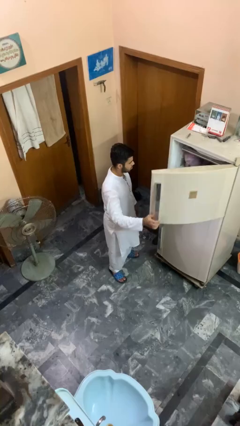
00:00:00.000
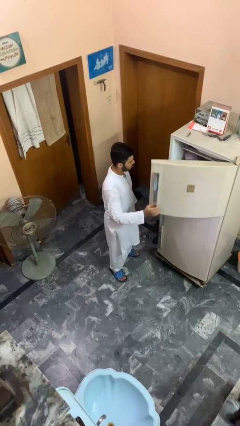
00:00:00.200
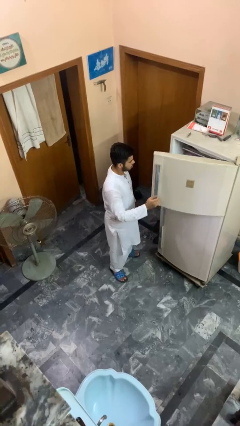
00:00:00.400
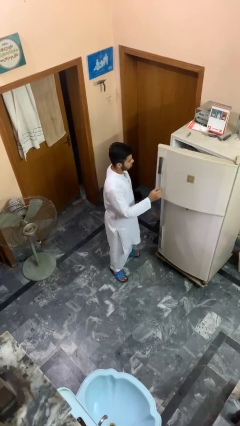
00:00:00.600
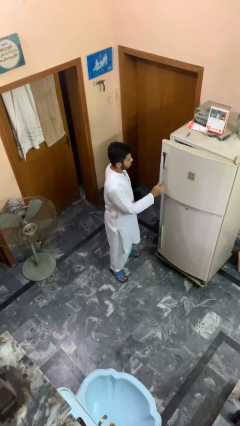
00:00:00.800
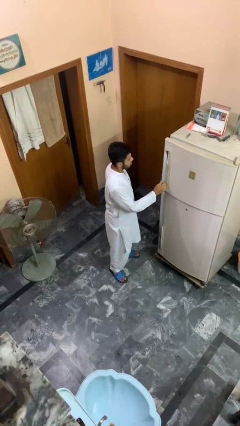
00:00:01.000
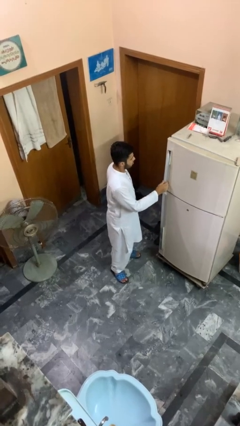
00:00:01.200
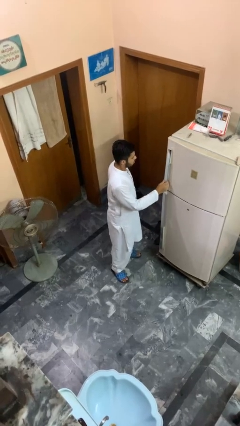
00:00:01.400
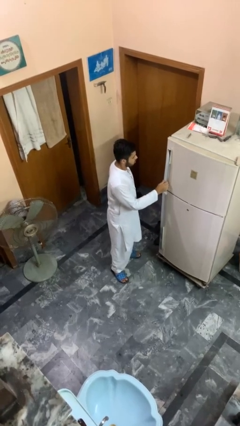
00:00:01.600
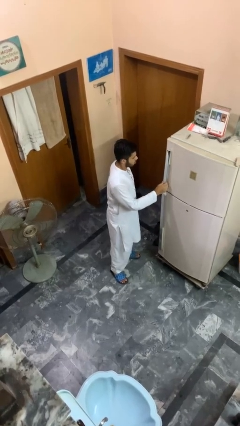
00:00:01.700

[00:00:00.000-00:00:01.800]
person closes refrigerator

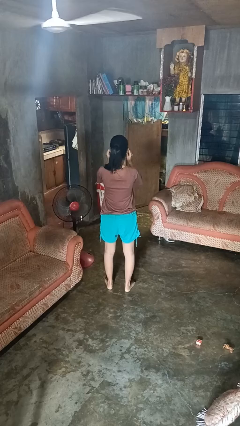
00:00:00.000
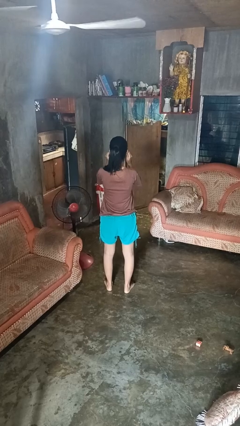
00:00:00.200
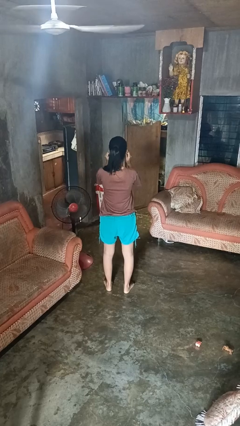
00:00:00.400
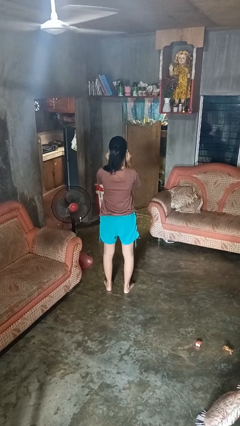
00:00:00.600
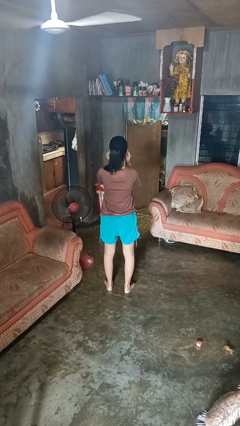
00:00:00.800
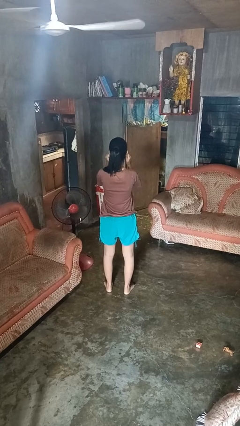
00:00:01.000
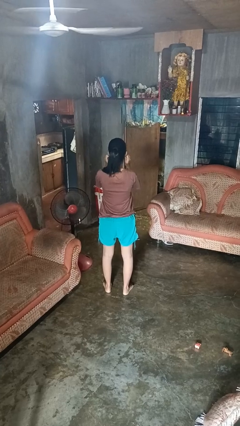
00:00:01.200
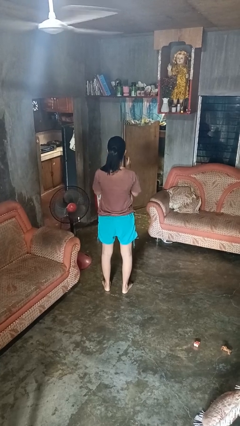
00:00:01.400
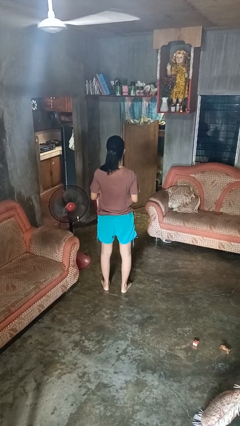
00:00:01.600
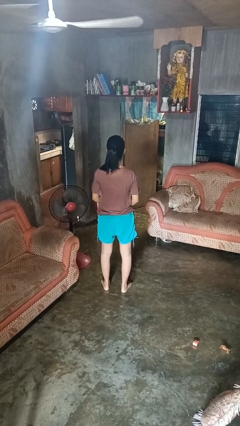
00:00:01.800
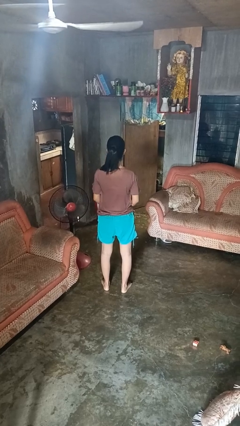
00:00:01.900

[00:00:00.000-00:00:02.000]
person touches earlobe

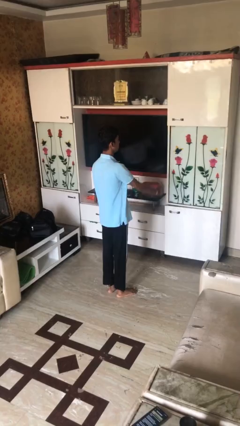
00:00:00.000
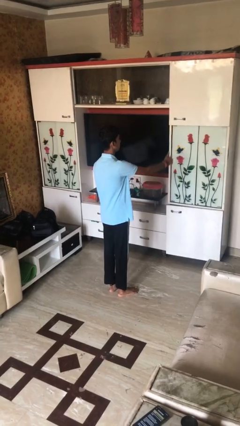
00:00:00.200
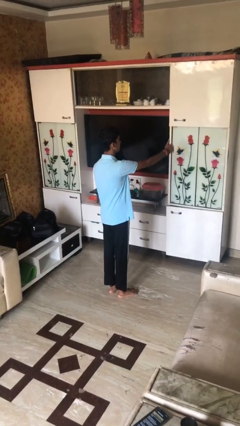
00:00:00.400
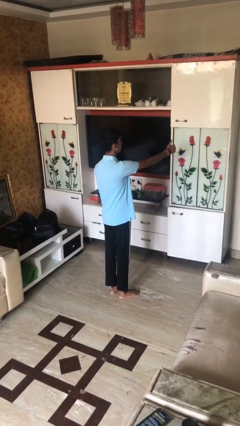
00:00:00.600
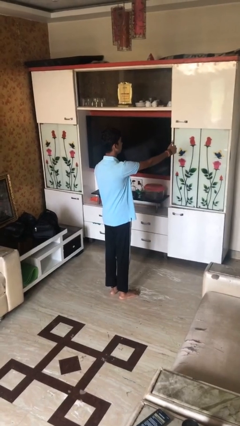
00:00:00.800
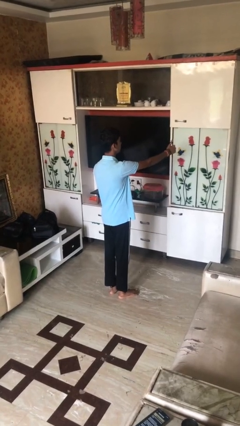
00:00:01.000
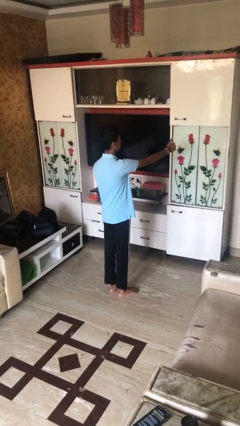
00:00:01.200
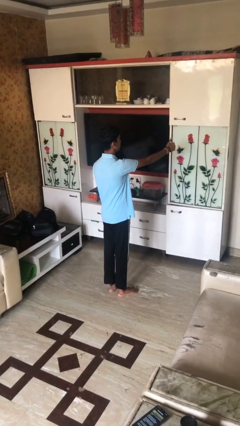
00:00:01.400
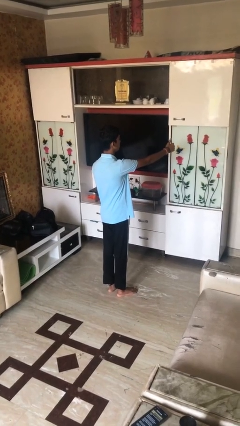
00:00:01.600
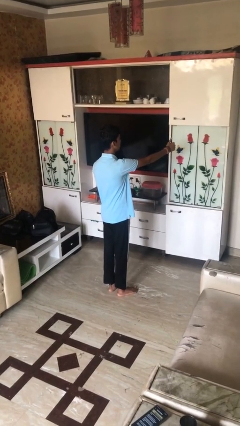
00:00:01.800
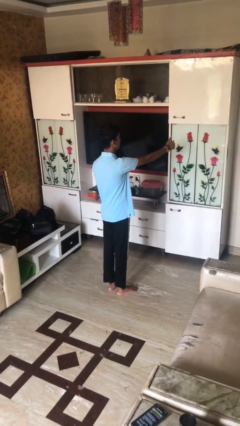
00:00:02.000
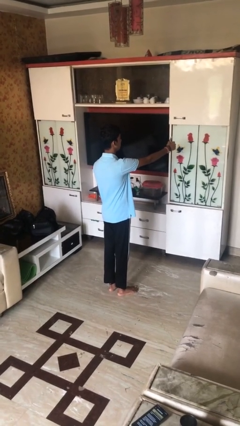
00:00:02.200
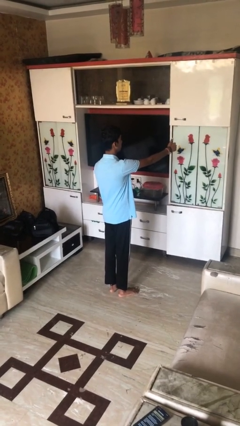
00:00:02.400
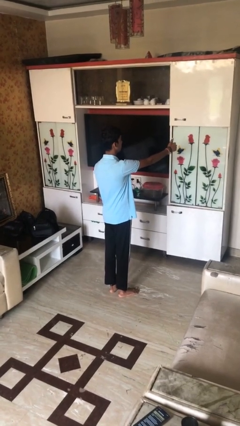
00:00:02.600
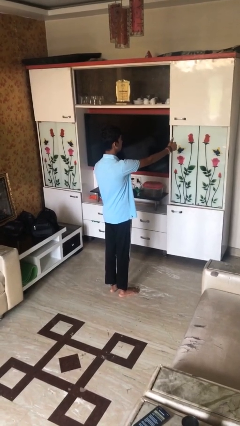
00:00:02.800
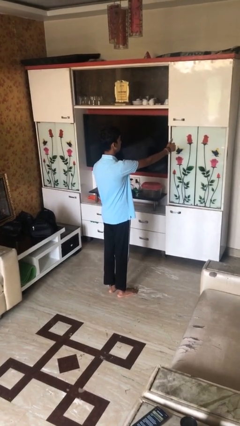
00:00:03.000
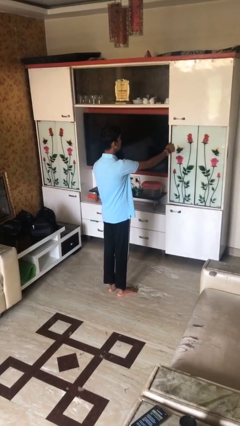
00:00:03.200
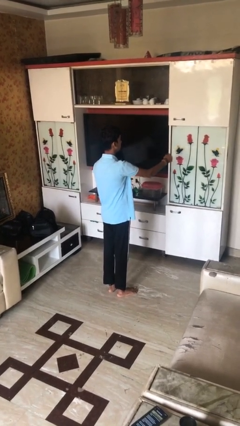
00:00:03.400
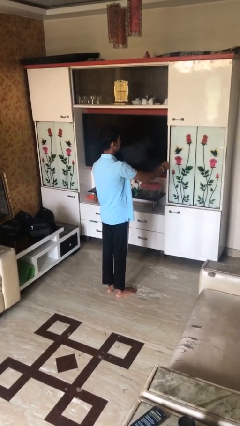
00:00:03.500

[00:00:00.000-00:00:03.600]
person gestures thumbs up

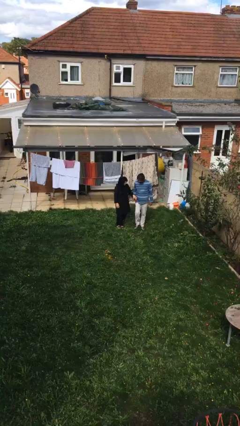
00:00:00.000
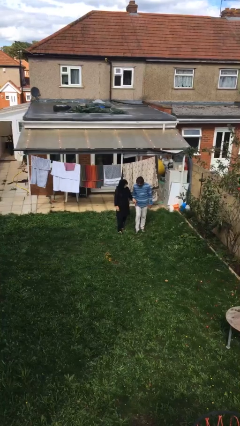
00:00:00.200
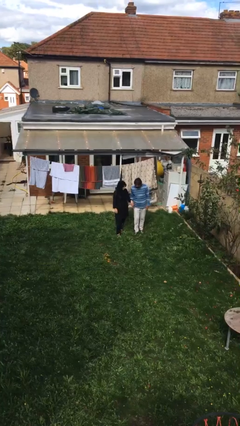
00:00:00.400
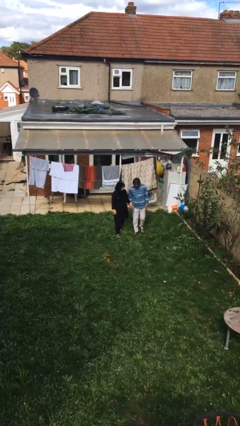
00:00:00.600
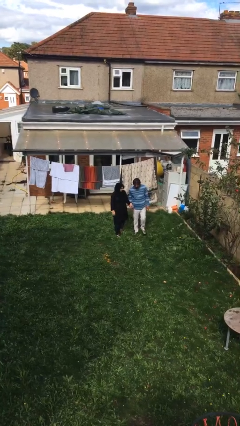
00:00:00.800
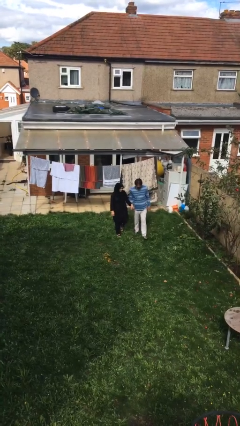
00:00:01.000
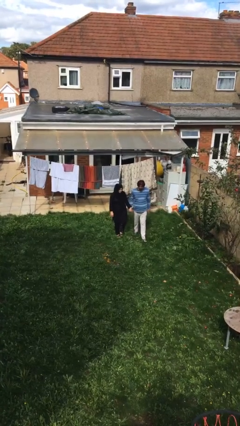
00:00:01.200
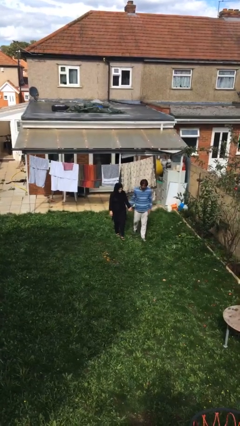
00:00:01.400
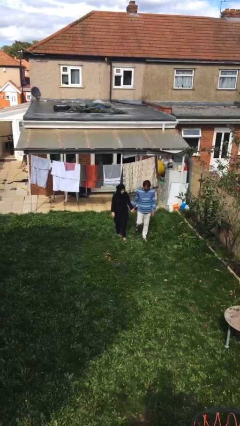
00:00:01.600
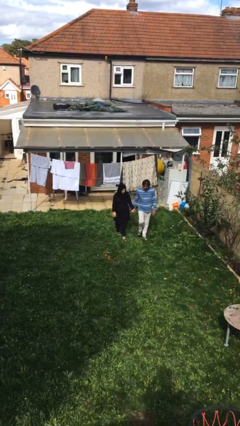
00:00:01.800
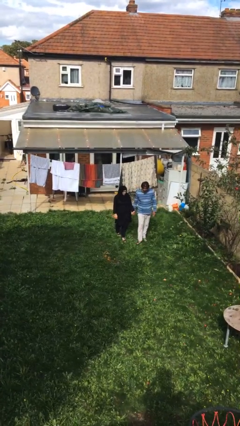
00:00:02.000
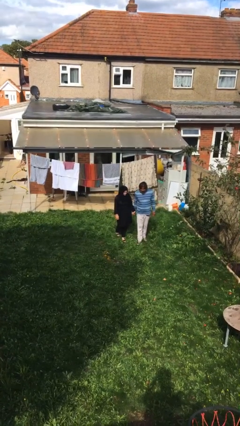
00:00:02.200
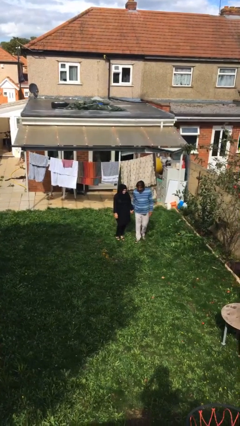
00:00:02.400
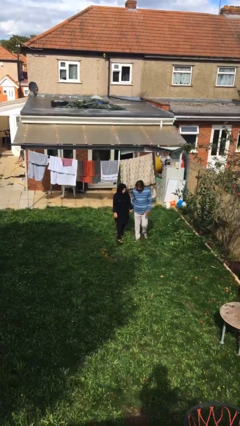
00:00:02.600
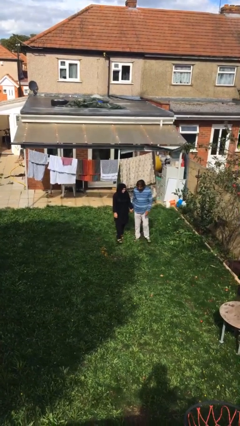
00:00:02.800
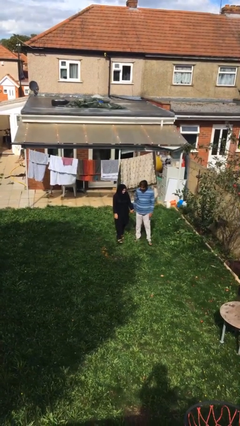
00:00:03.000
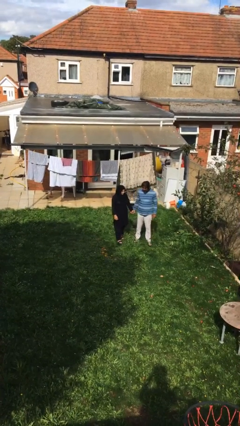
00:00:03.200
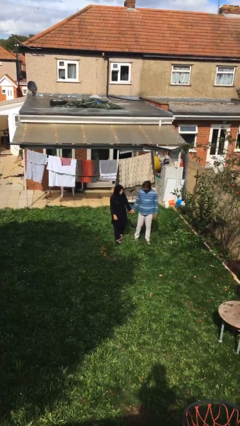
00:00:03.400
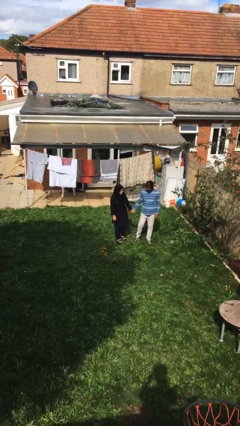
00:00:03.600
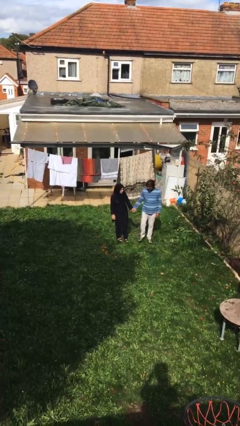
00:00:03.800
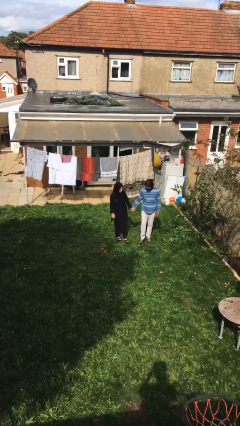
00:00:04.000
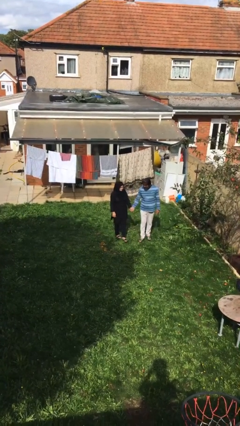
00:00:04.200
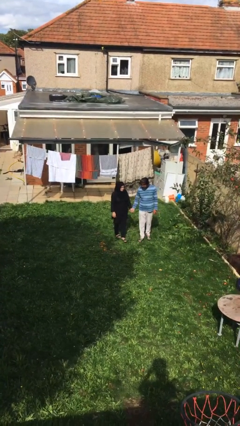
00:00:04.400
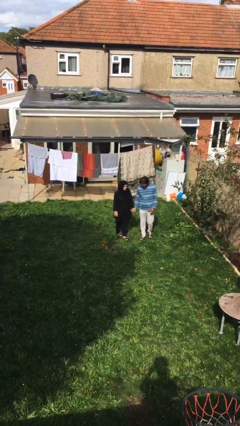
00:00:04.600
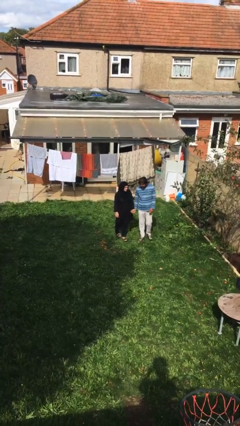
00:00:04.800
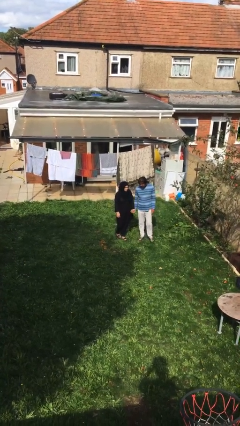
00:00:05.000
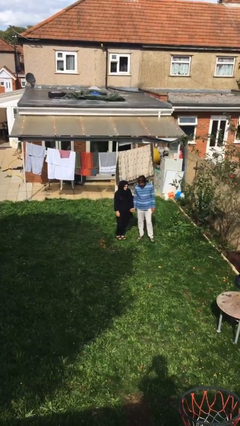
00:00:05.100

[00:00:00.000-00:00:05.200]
person holds hand

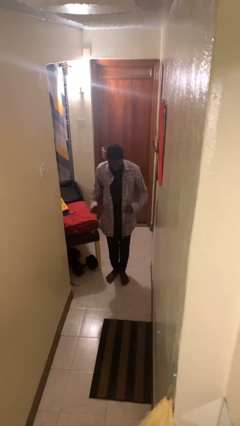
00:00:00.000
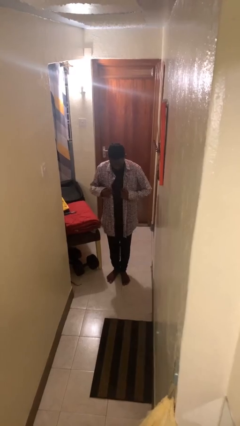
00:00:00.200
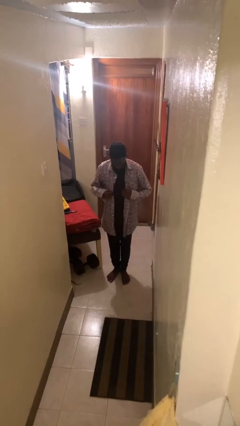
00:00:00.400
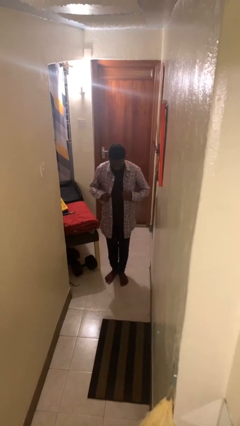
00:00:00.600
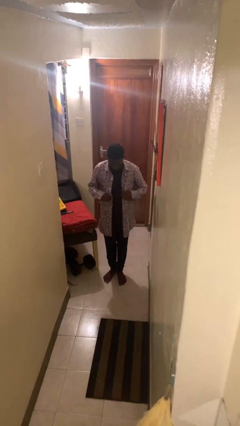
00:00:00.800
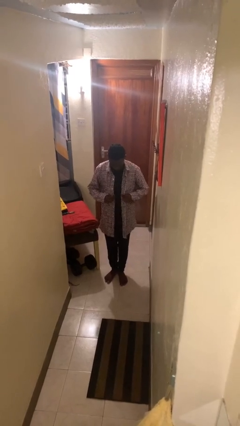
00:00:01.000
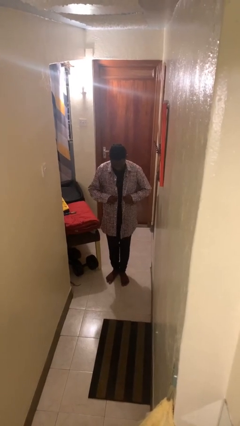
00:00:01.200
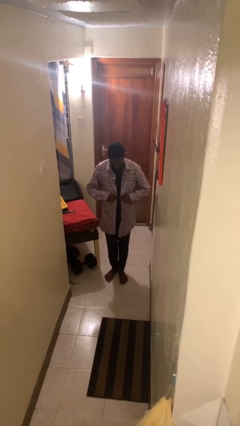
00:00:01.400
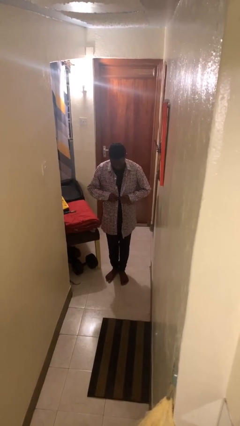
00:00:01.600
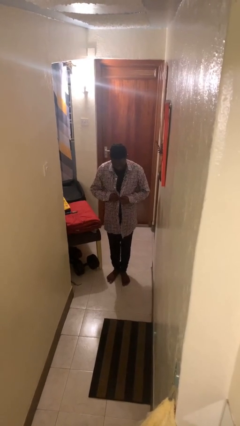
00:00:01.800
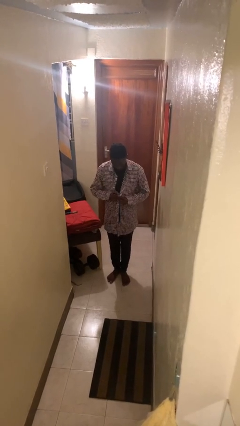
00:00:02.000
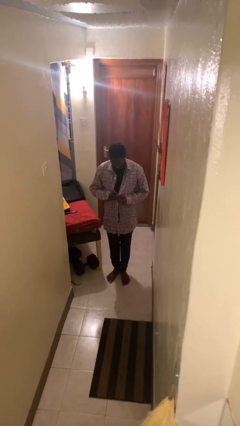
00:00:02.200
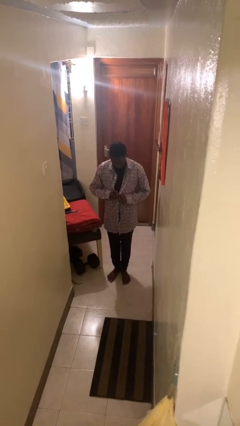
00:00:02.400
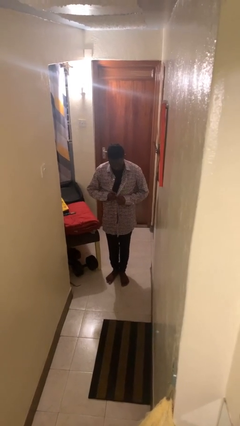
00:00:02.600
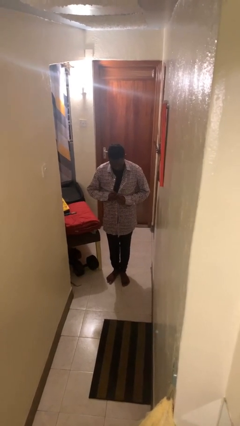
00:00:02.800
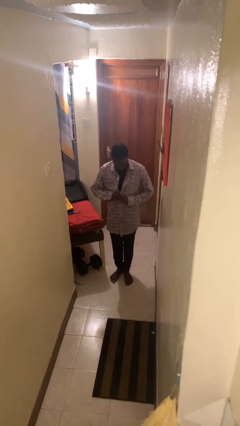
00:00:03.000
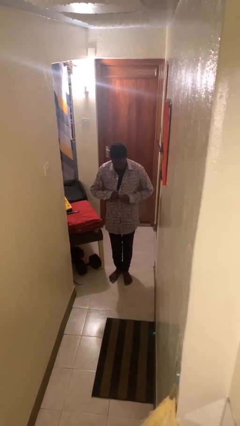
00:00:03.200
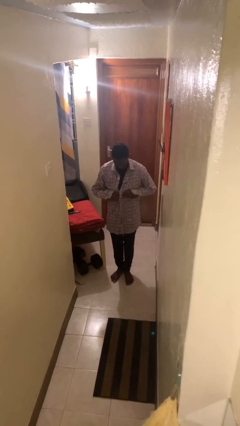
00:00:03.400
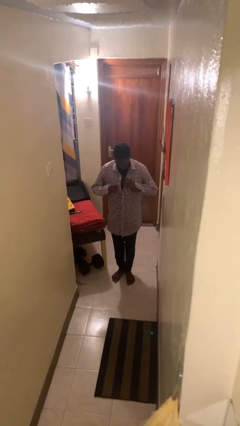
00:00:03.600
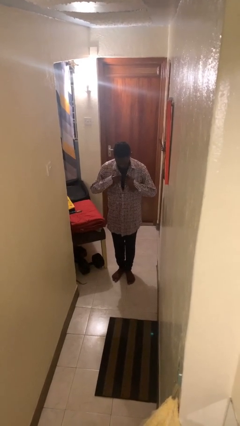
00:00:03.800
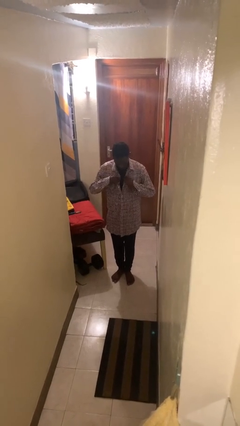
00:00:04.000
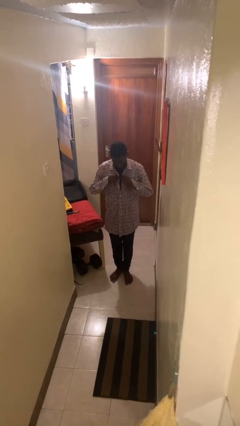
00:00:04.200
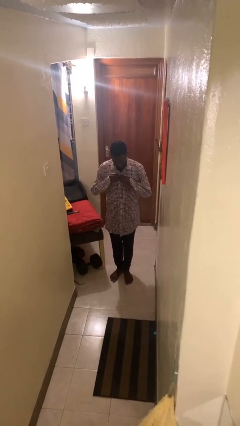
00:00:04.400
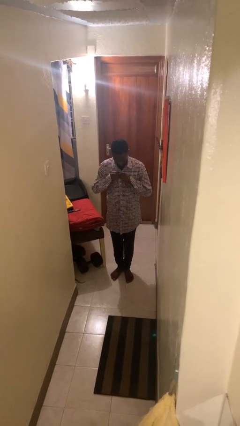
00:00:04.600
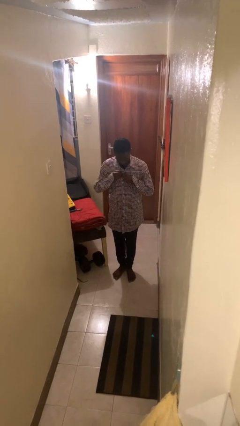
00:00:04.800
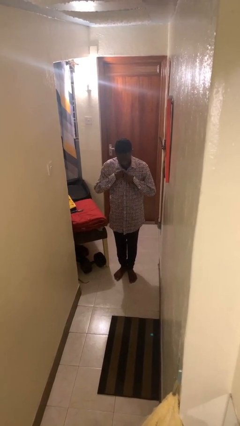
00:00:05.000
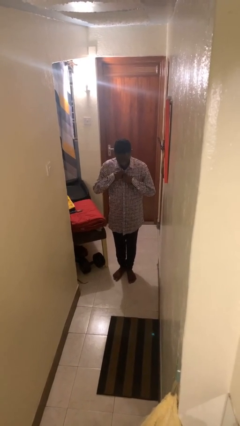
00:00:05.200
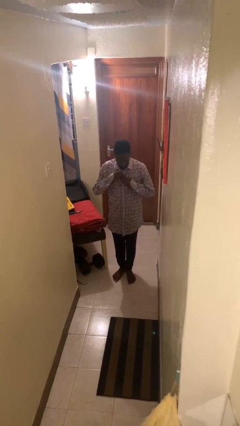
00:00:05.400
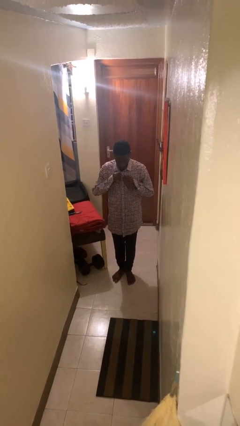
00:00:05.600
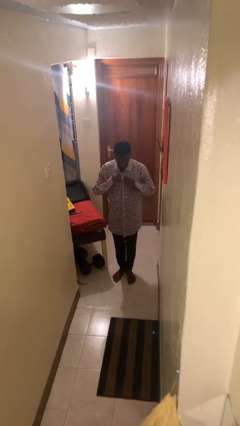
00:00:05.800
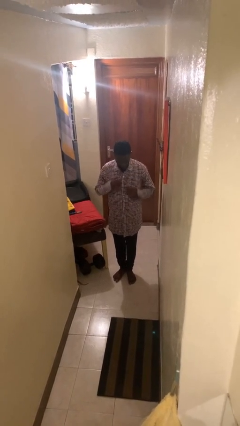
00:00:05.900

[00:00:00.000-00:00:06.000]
person buttons shirt
